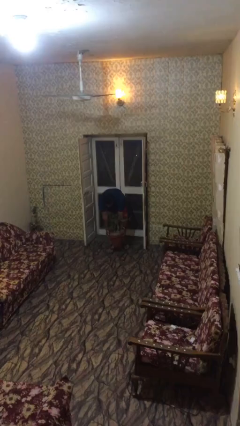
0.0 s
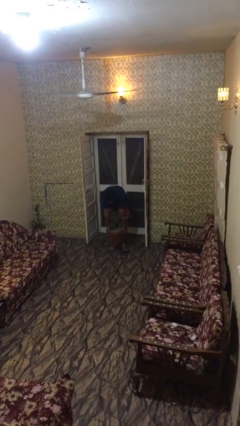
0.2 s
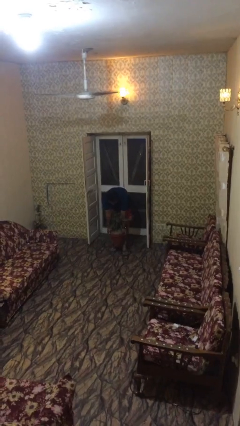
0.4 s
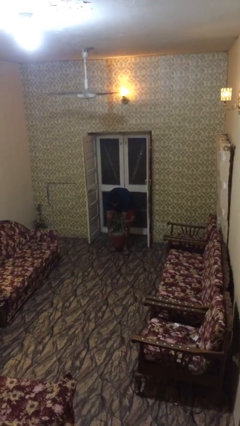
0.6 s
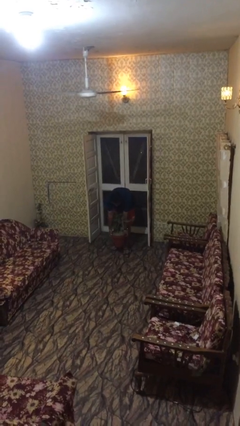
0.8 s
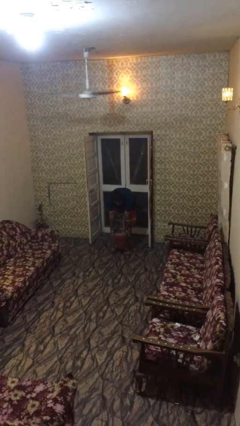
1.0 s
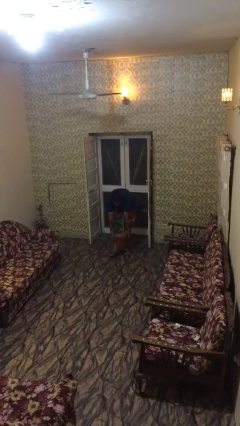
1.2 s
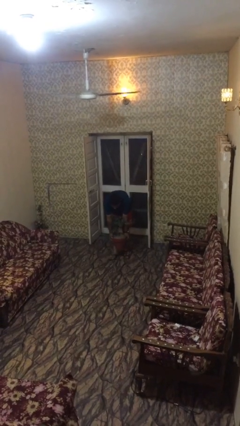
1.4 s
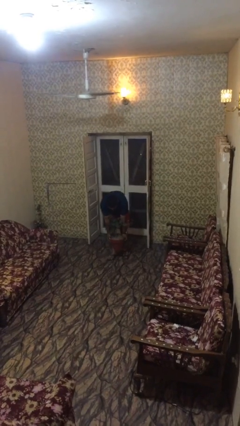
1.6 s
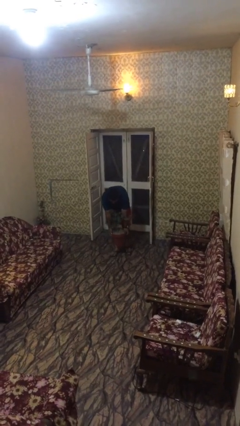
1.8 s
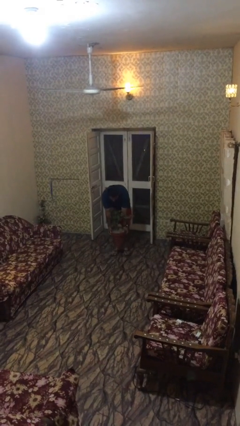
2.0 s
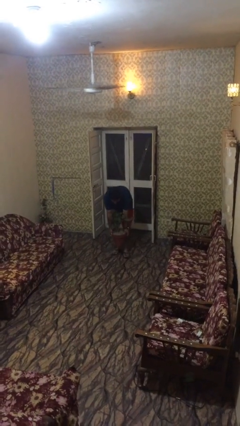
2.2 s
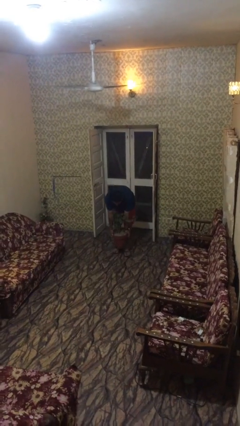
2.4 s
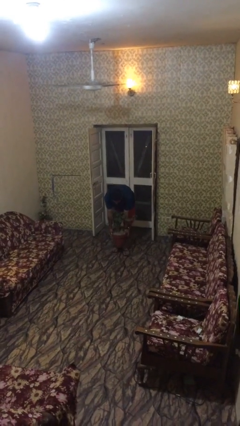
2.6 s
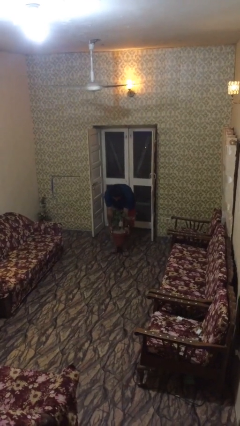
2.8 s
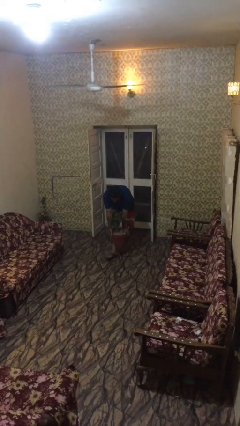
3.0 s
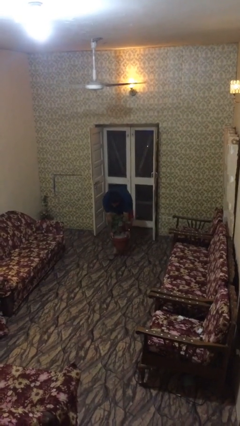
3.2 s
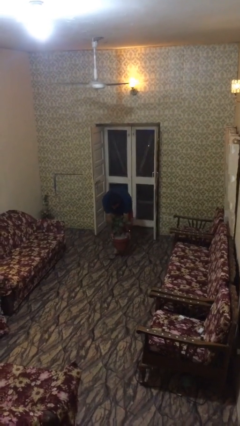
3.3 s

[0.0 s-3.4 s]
person carries heavy object

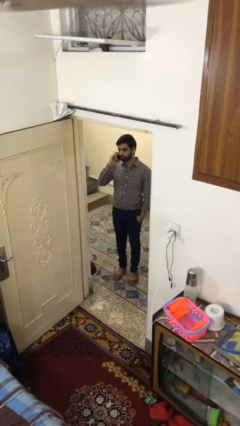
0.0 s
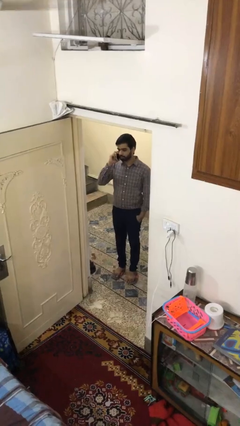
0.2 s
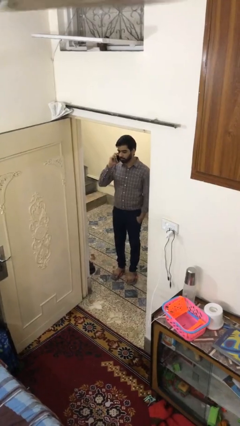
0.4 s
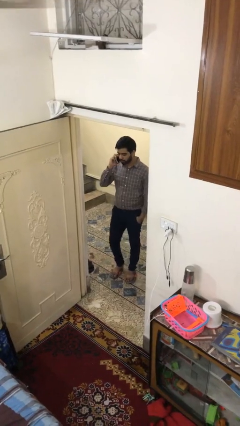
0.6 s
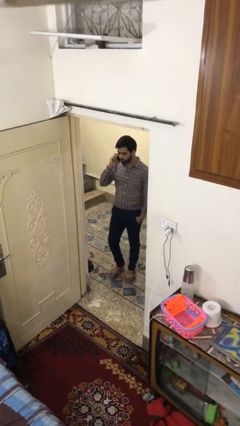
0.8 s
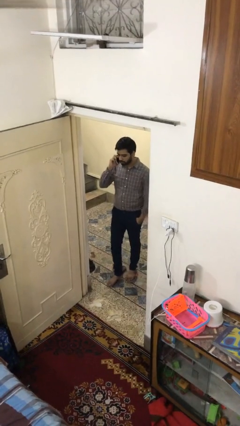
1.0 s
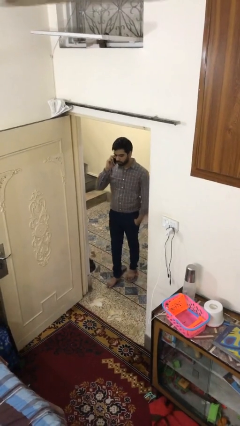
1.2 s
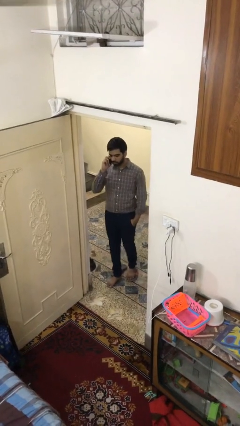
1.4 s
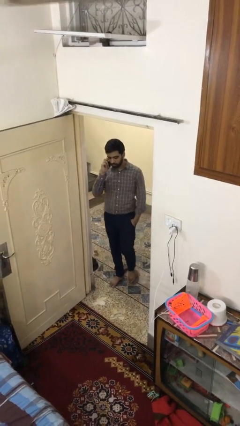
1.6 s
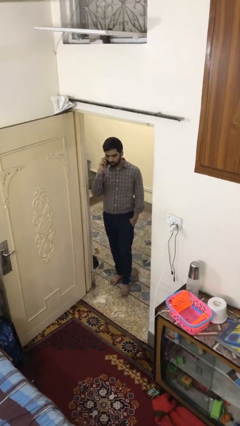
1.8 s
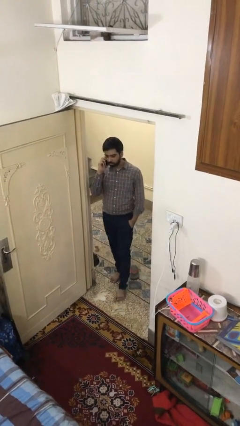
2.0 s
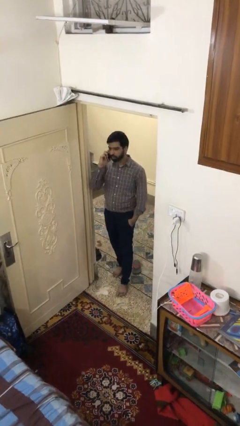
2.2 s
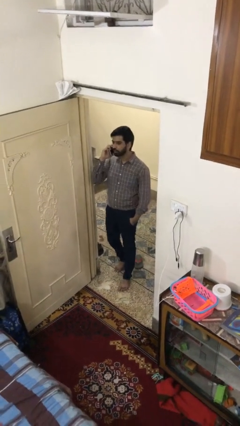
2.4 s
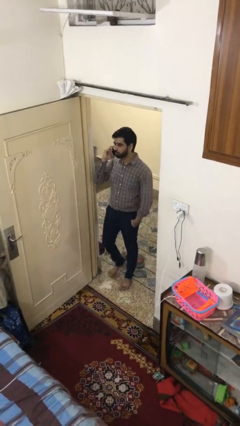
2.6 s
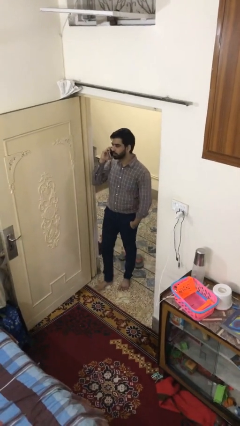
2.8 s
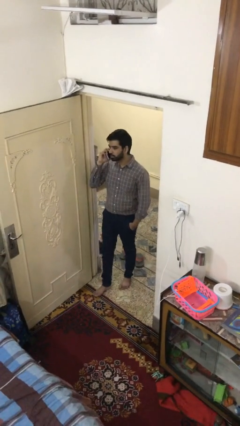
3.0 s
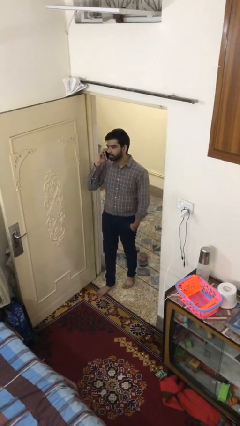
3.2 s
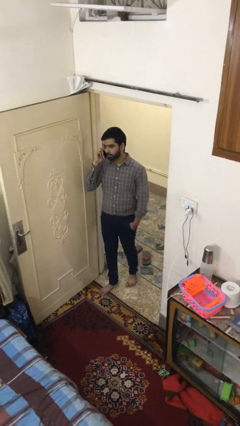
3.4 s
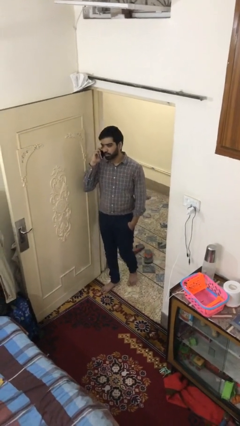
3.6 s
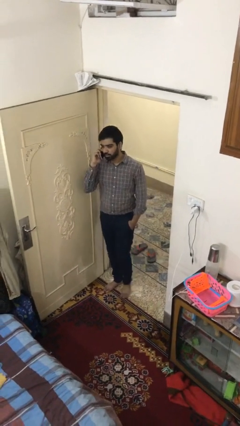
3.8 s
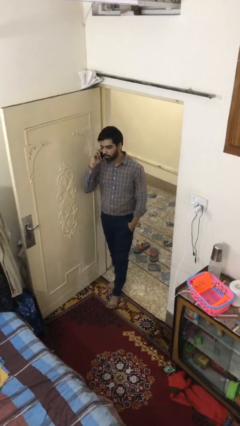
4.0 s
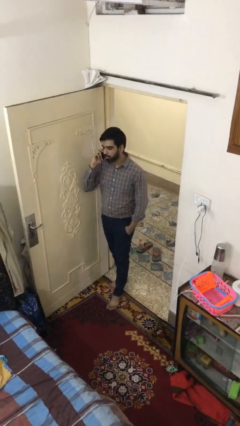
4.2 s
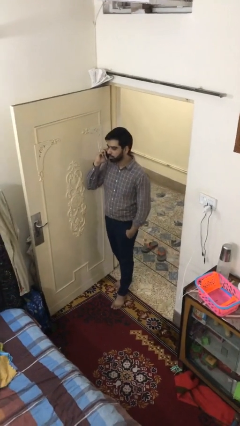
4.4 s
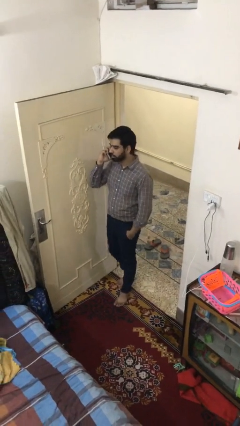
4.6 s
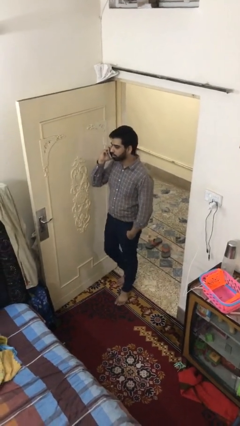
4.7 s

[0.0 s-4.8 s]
person enters scene through structure

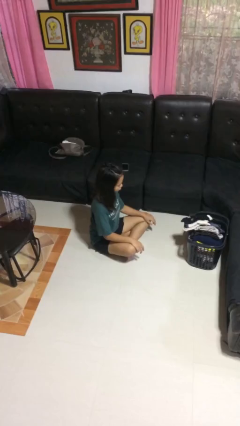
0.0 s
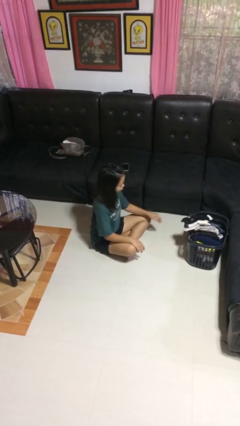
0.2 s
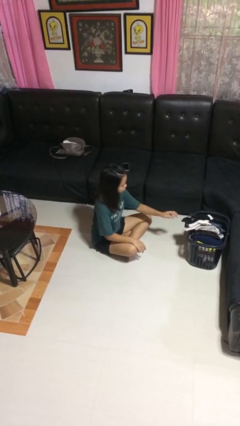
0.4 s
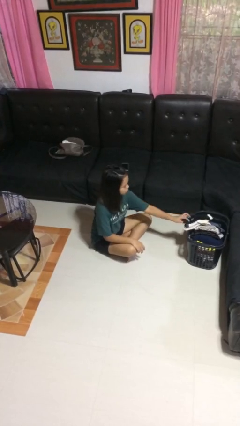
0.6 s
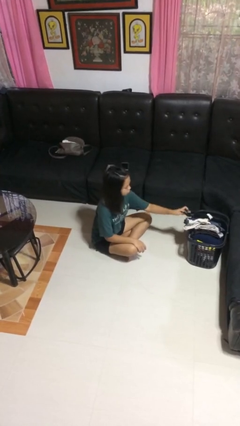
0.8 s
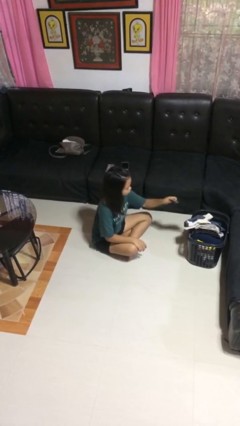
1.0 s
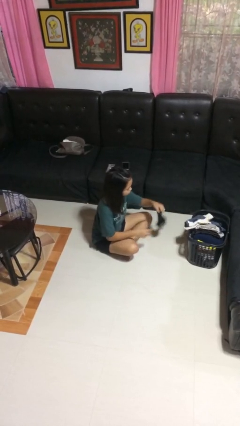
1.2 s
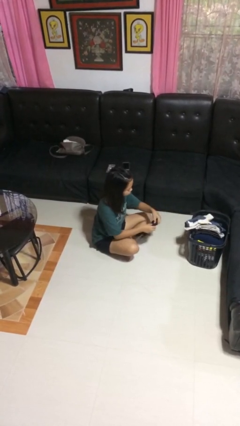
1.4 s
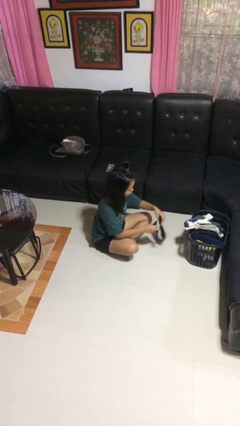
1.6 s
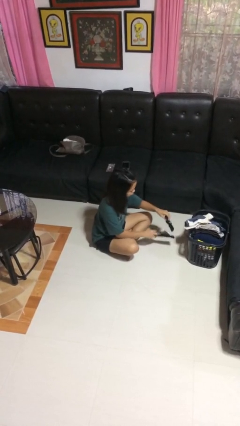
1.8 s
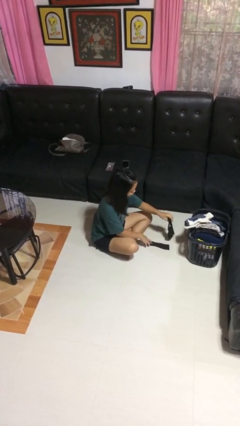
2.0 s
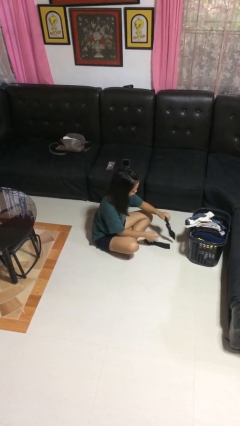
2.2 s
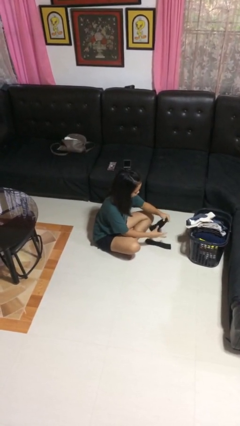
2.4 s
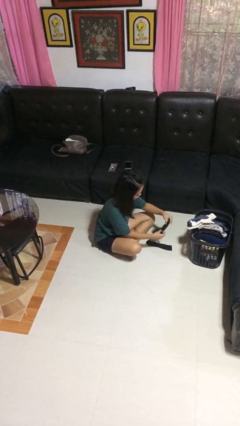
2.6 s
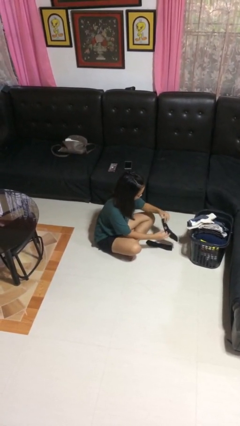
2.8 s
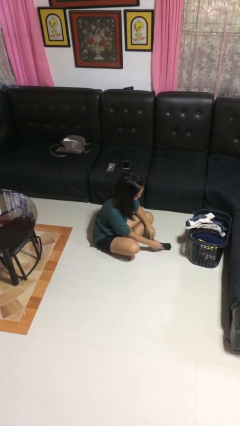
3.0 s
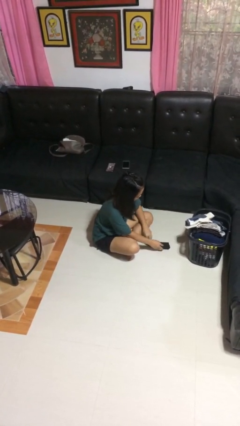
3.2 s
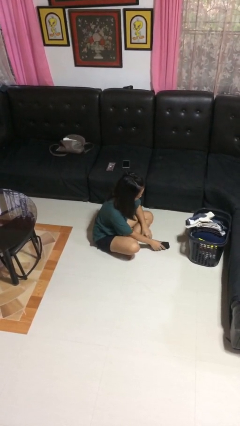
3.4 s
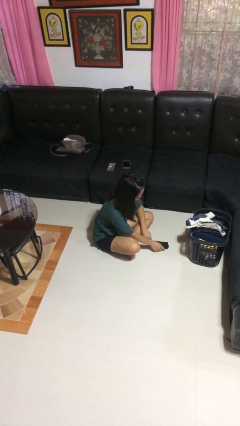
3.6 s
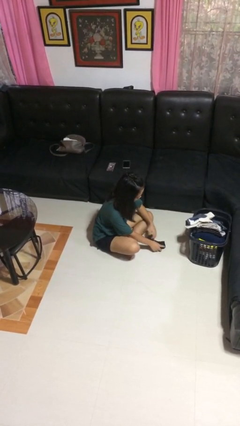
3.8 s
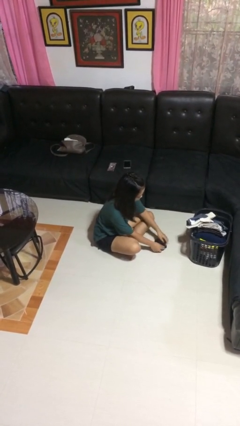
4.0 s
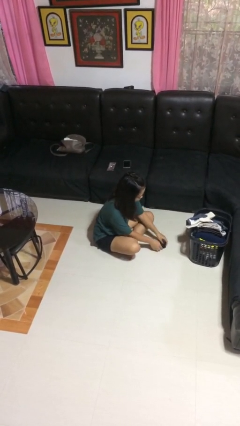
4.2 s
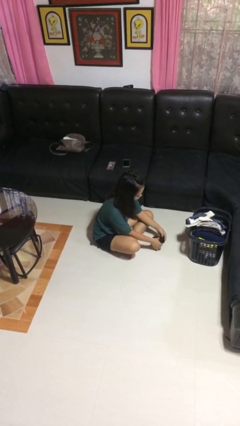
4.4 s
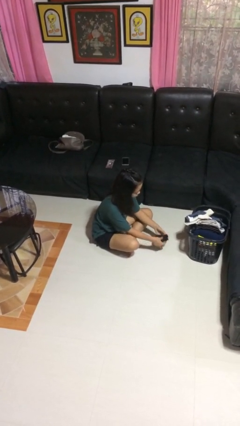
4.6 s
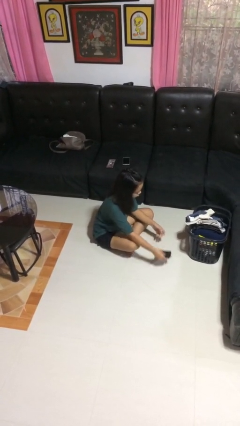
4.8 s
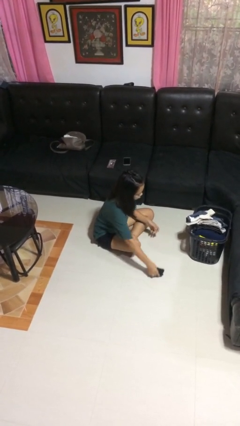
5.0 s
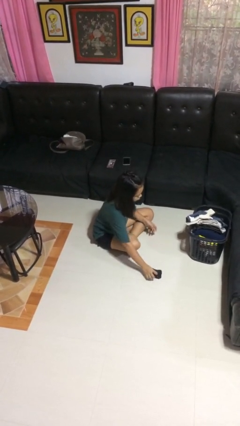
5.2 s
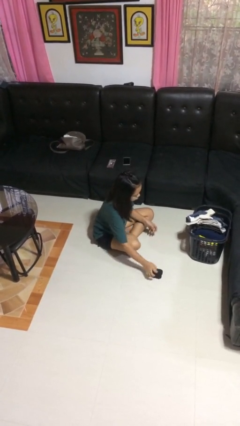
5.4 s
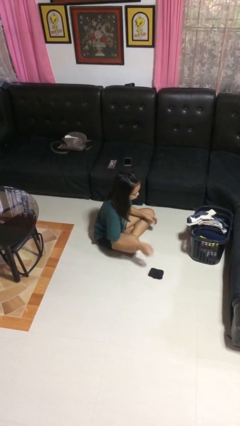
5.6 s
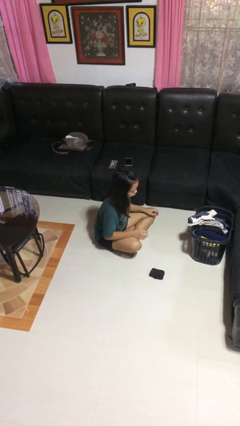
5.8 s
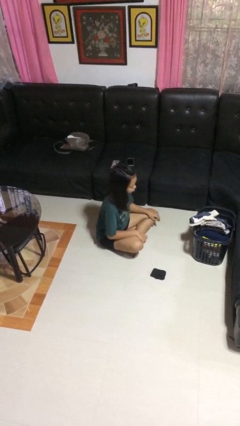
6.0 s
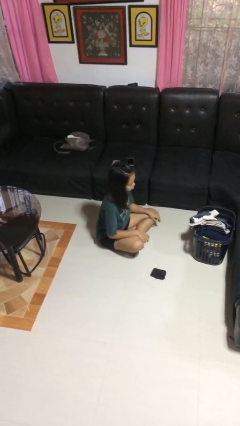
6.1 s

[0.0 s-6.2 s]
person folds socks

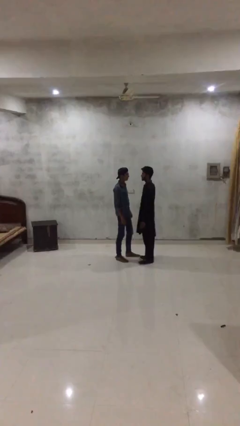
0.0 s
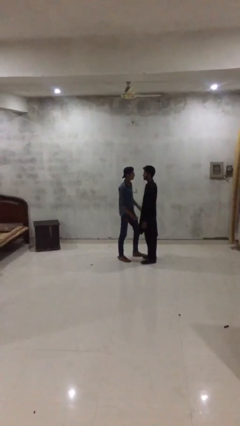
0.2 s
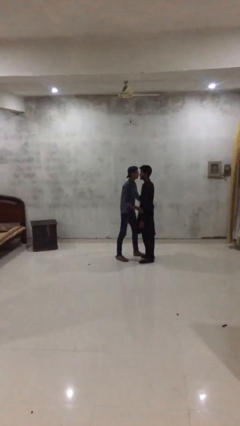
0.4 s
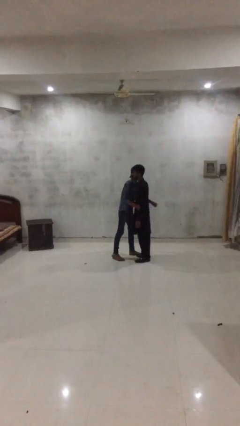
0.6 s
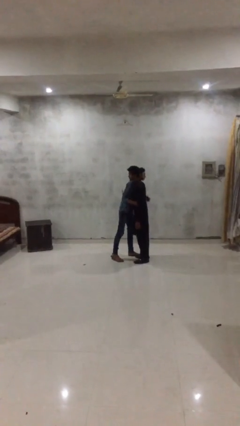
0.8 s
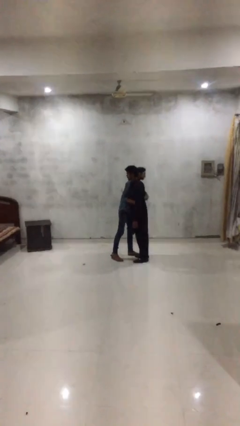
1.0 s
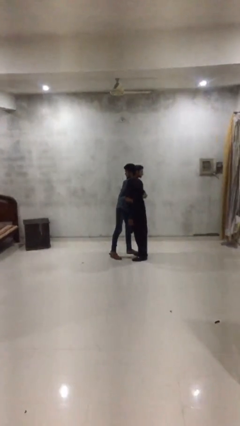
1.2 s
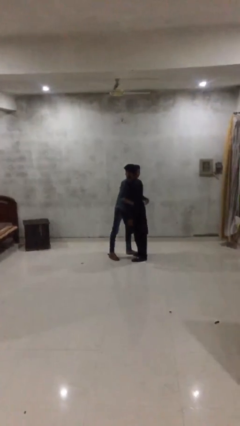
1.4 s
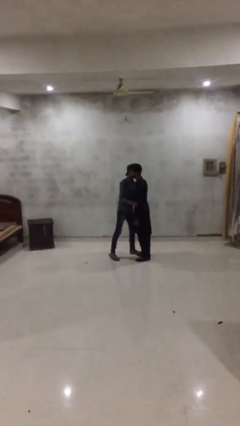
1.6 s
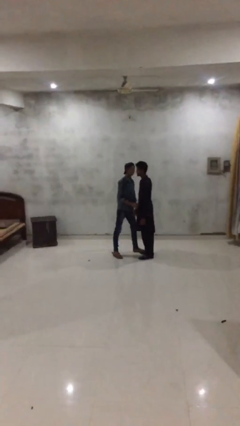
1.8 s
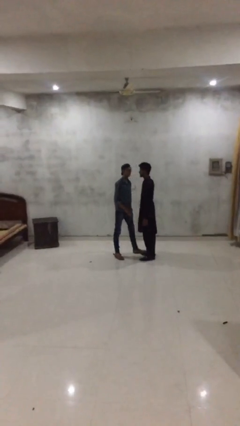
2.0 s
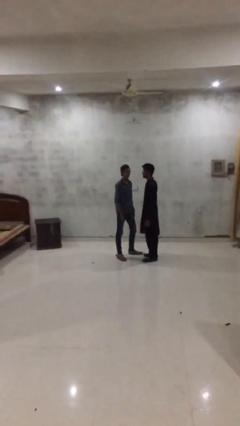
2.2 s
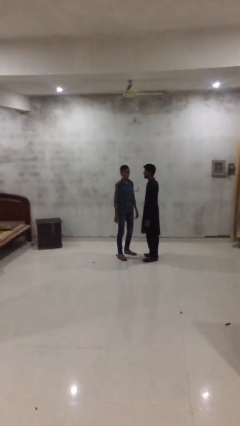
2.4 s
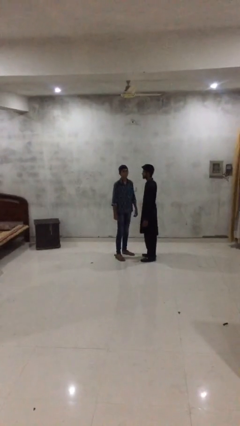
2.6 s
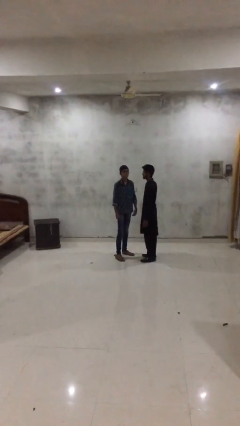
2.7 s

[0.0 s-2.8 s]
person embraces person

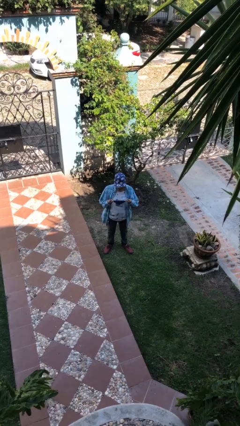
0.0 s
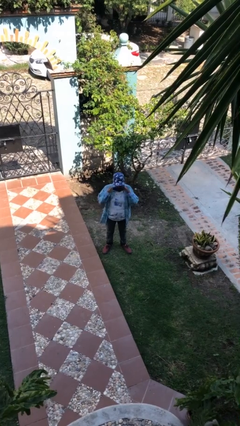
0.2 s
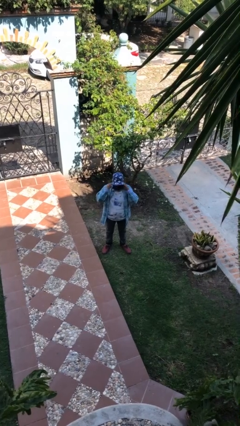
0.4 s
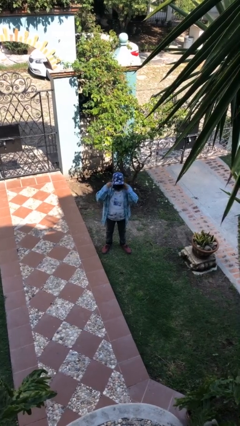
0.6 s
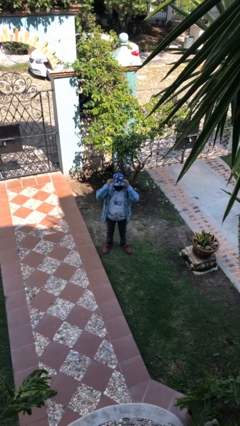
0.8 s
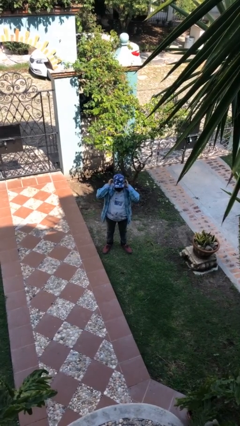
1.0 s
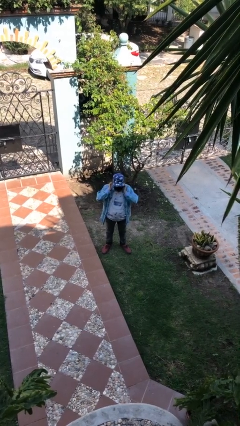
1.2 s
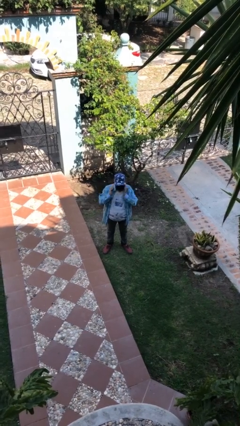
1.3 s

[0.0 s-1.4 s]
person puts on facemask
